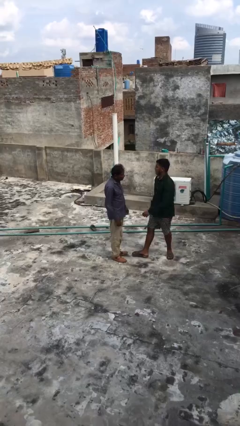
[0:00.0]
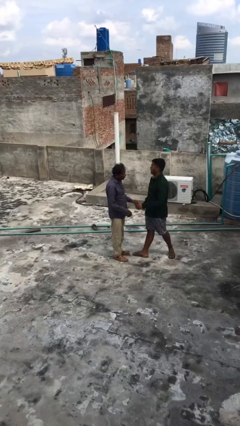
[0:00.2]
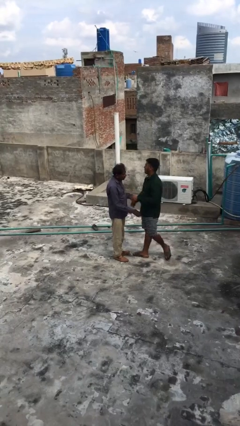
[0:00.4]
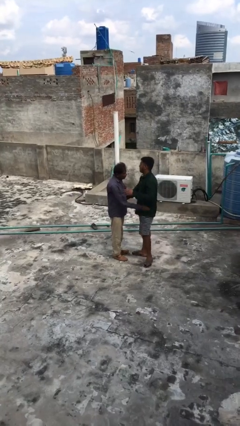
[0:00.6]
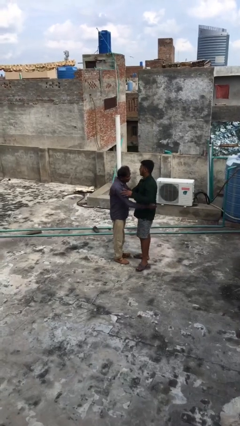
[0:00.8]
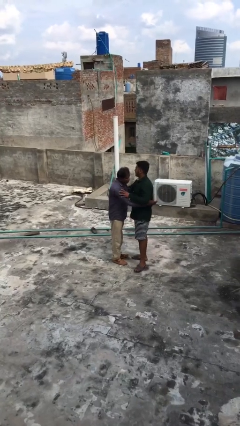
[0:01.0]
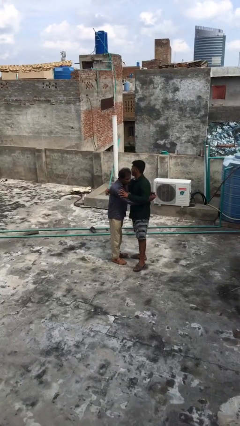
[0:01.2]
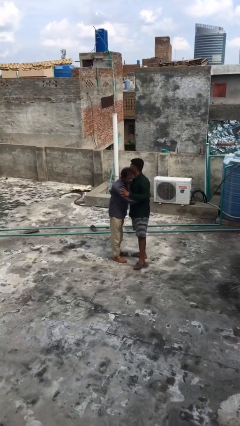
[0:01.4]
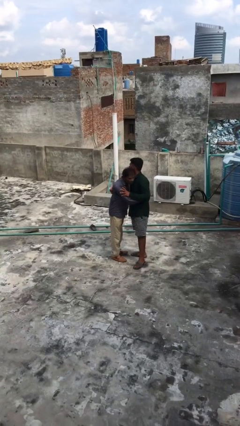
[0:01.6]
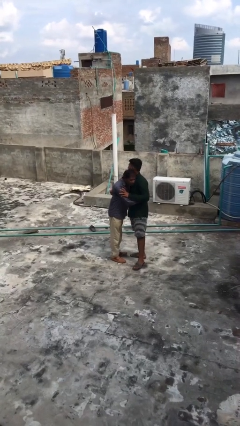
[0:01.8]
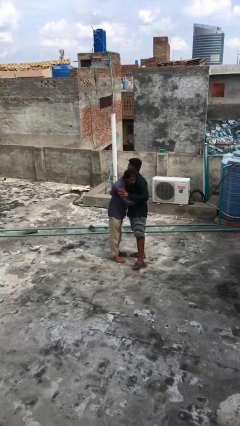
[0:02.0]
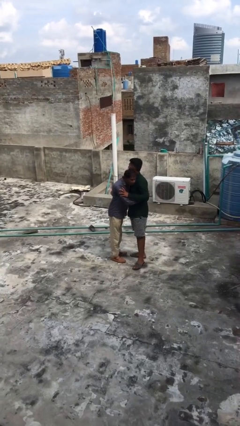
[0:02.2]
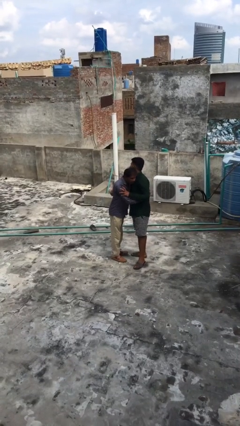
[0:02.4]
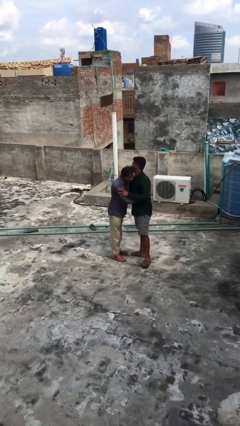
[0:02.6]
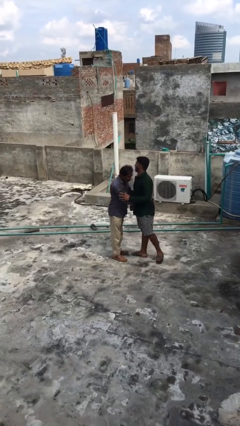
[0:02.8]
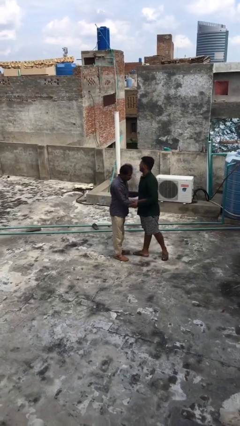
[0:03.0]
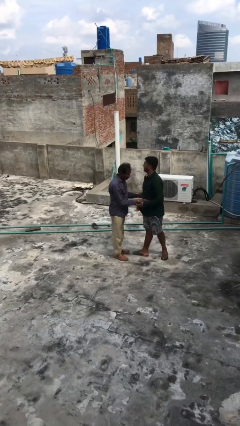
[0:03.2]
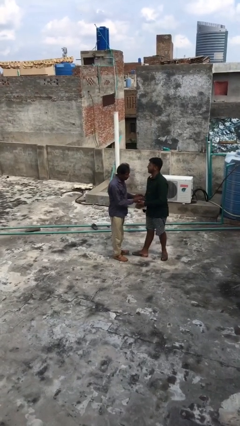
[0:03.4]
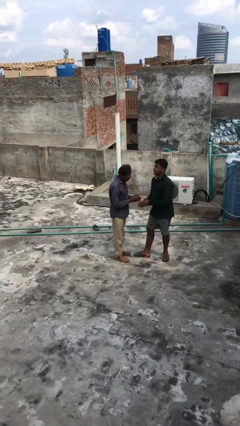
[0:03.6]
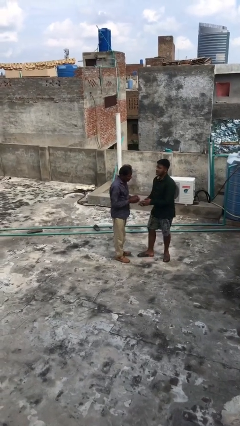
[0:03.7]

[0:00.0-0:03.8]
person embraces person

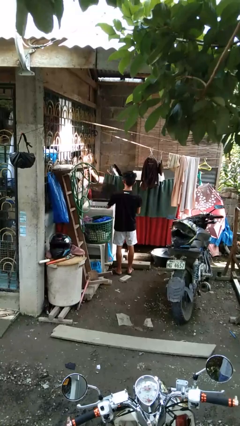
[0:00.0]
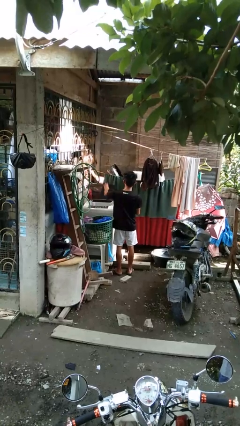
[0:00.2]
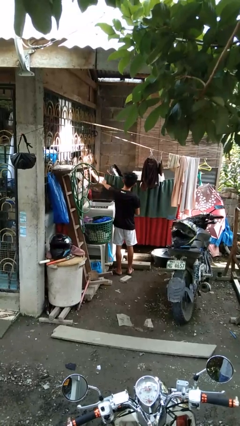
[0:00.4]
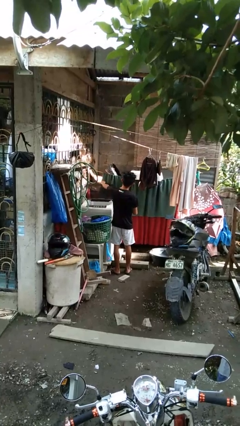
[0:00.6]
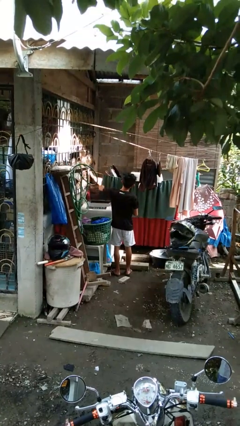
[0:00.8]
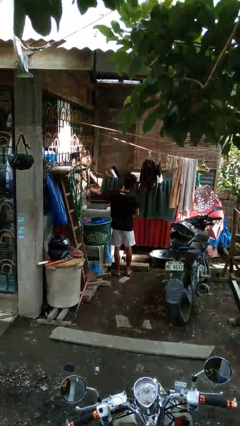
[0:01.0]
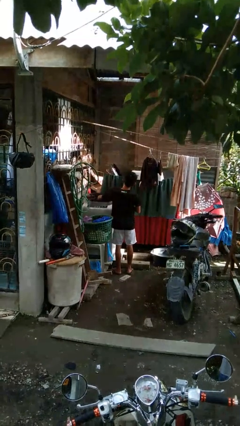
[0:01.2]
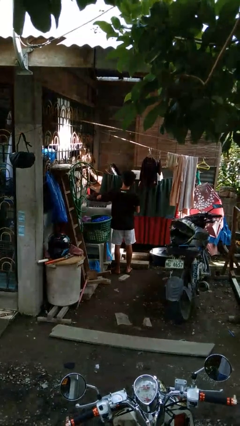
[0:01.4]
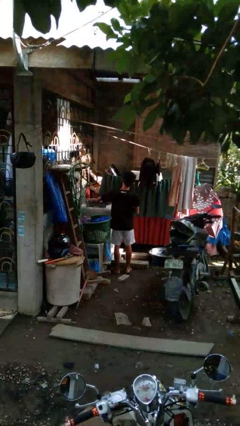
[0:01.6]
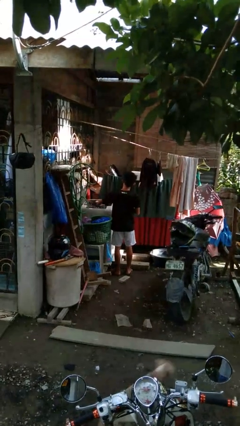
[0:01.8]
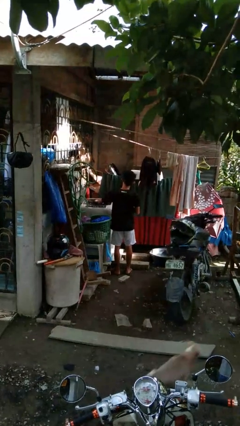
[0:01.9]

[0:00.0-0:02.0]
person closes clothes washer

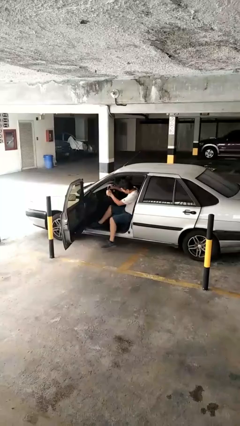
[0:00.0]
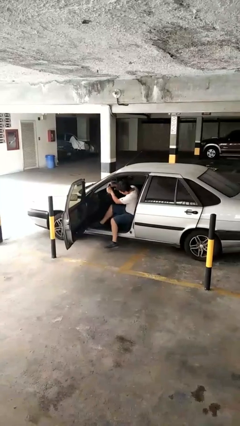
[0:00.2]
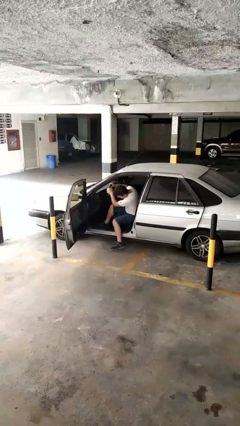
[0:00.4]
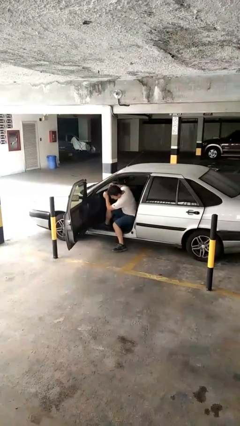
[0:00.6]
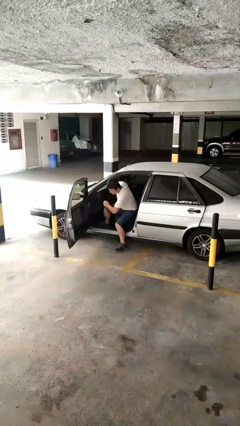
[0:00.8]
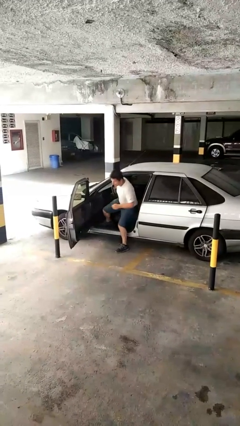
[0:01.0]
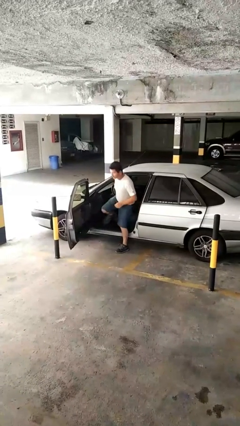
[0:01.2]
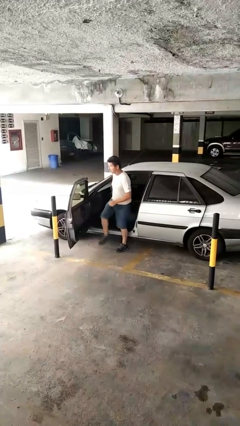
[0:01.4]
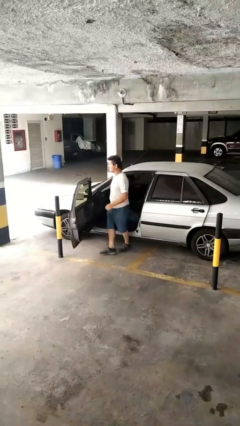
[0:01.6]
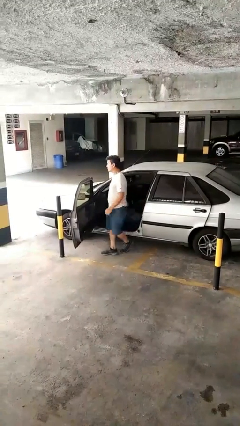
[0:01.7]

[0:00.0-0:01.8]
person exits car

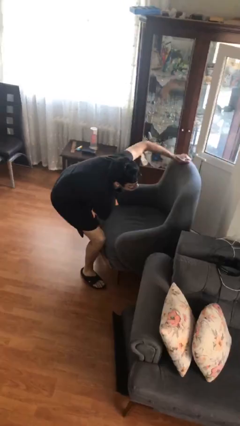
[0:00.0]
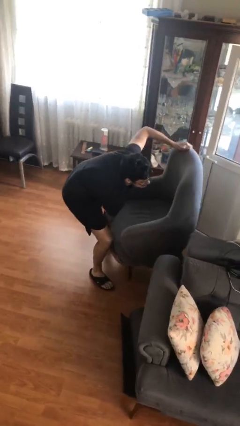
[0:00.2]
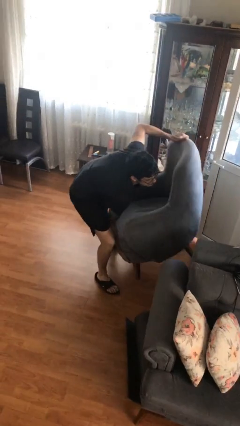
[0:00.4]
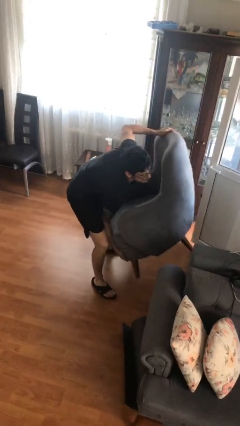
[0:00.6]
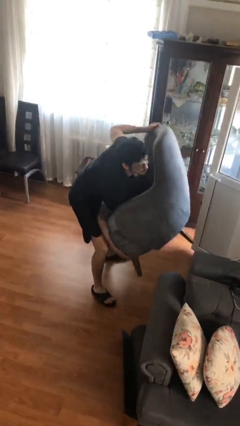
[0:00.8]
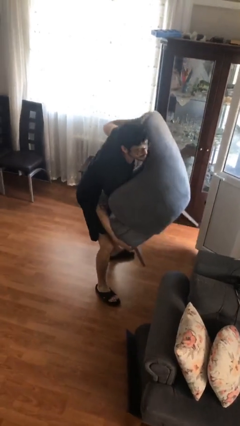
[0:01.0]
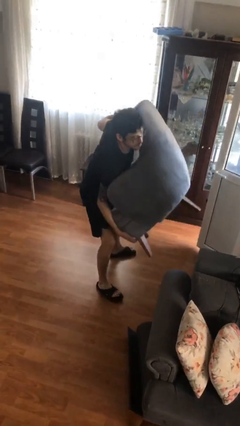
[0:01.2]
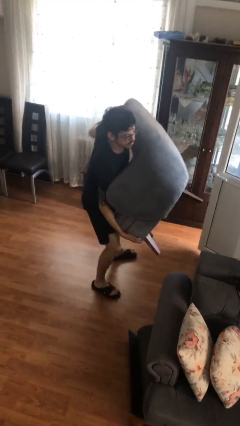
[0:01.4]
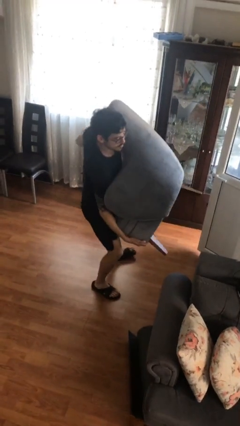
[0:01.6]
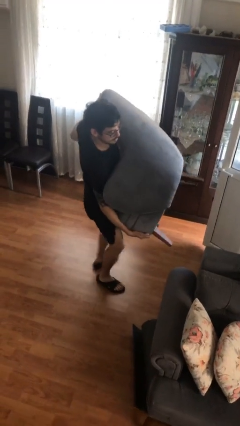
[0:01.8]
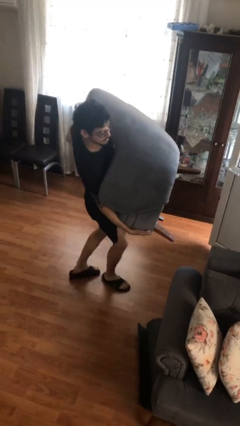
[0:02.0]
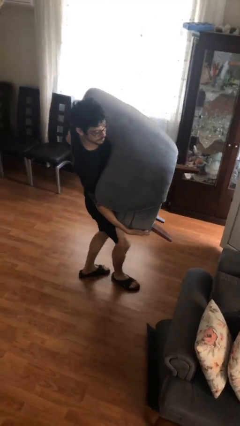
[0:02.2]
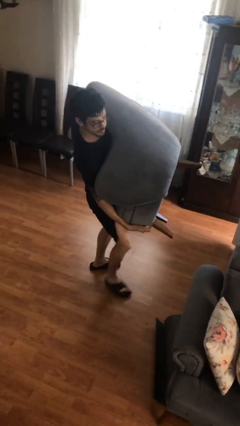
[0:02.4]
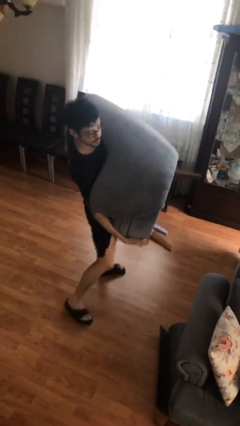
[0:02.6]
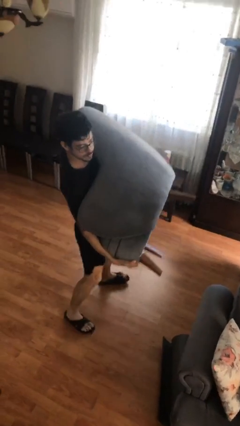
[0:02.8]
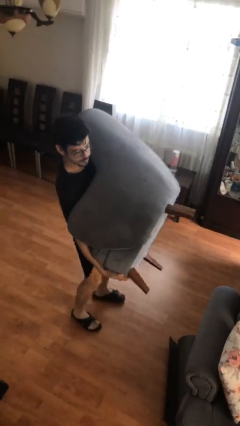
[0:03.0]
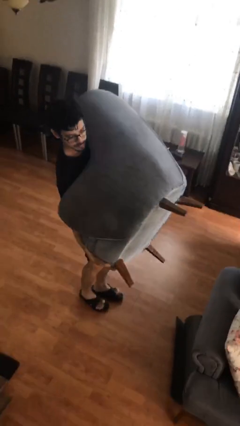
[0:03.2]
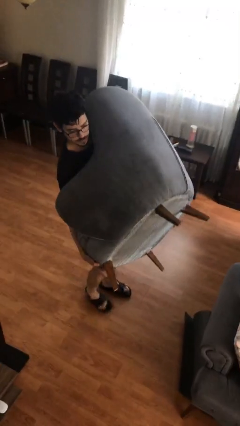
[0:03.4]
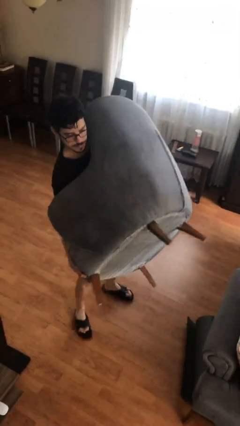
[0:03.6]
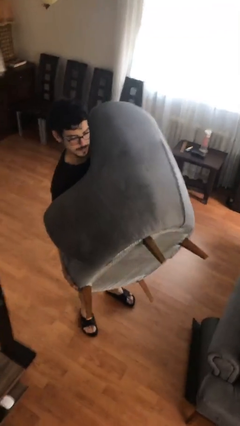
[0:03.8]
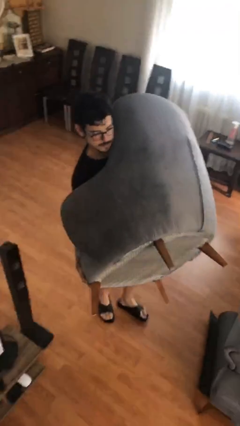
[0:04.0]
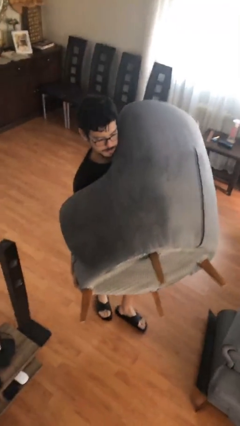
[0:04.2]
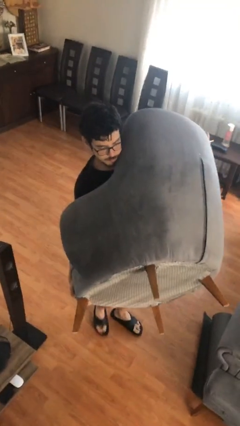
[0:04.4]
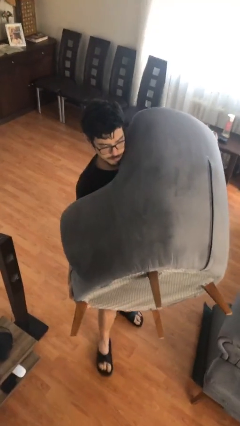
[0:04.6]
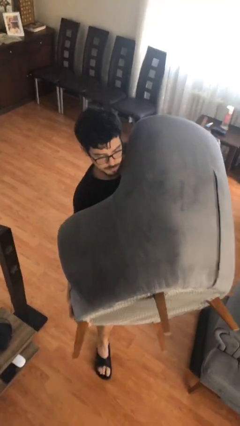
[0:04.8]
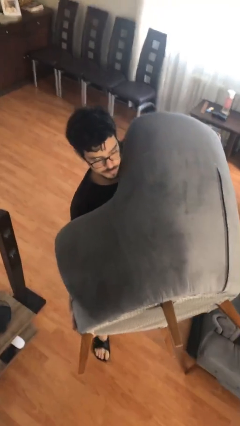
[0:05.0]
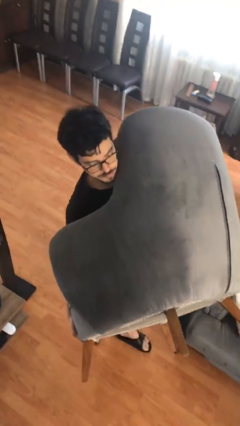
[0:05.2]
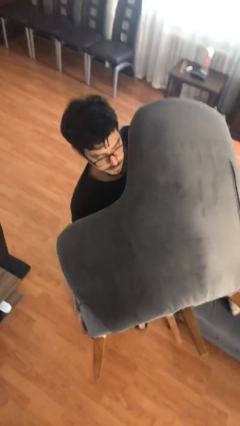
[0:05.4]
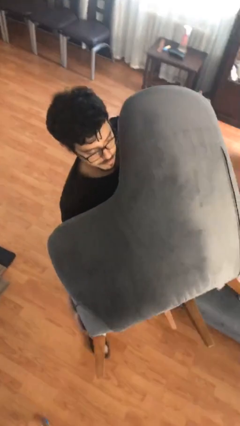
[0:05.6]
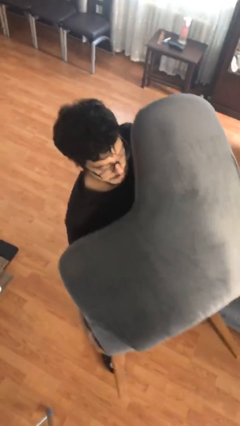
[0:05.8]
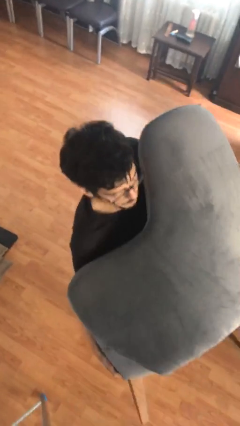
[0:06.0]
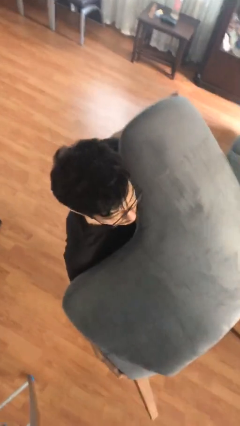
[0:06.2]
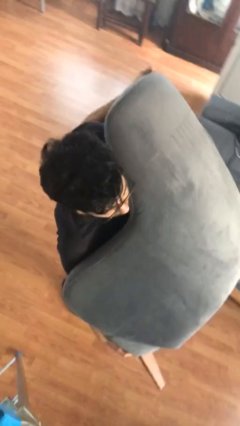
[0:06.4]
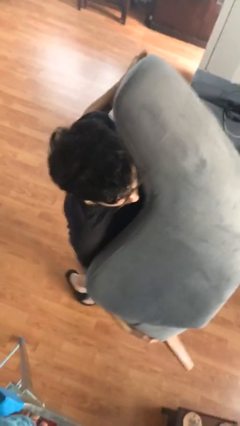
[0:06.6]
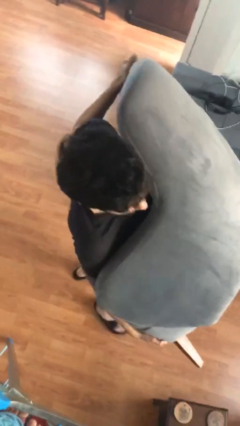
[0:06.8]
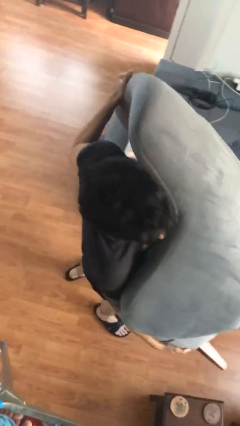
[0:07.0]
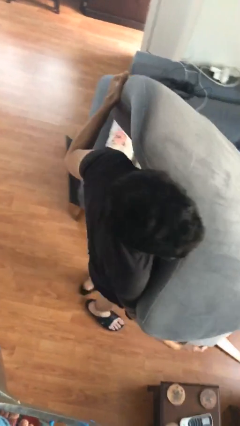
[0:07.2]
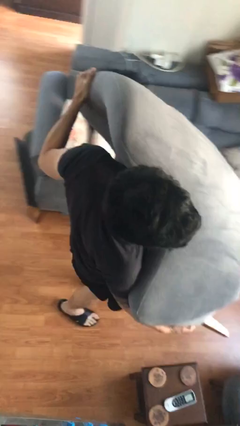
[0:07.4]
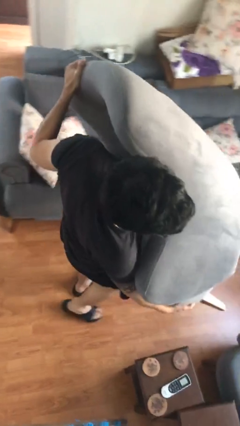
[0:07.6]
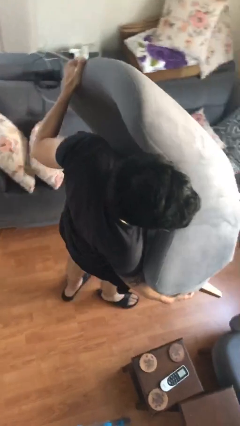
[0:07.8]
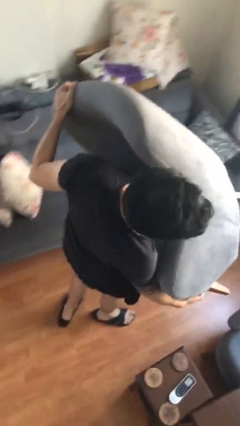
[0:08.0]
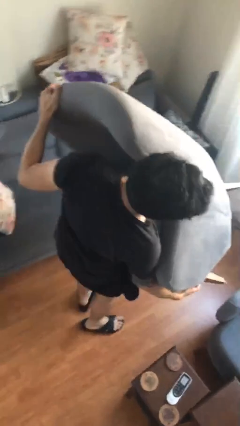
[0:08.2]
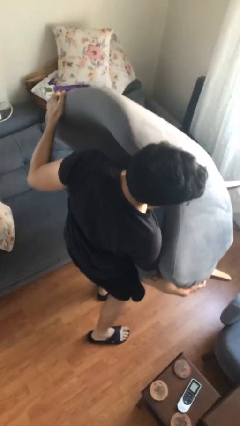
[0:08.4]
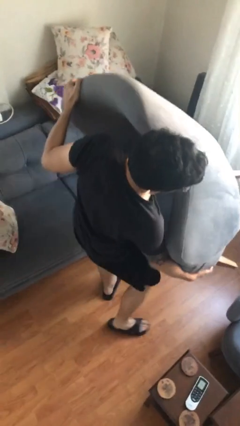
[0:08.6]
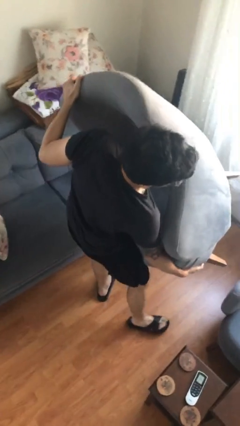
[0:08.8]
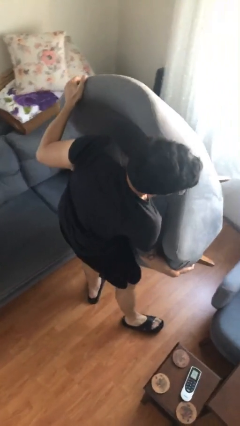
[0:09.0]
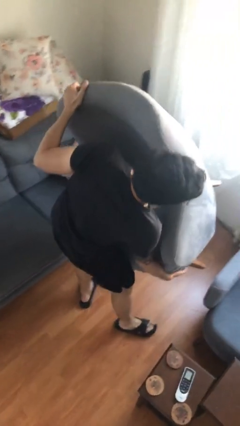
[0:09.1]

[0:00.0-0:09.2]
person carries heavy object

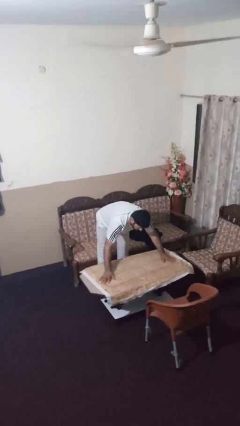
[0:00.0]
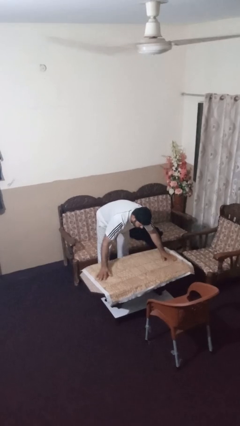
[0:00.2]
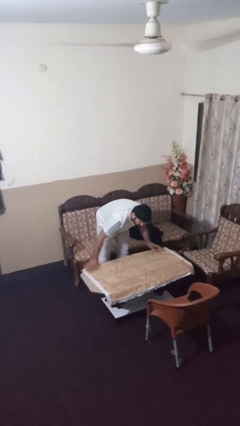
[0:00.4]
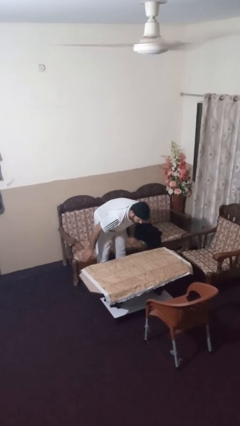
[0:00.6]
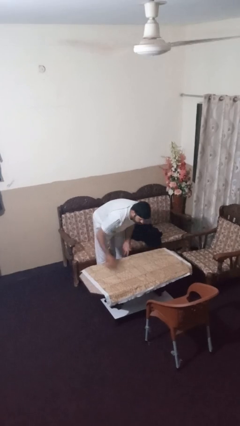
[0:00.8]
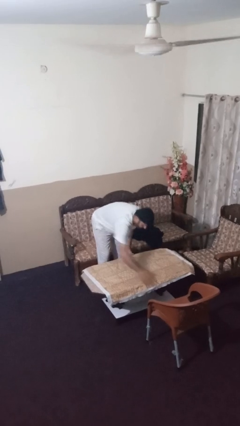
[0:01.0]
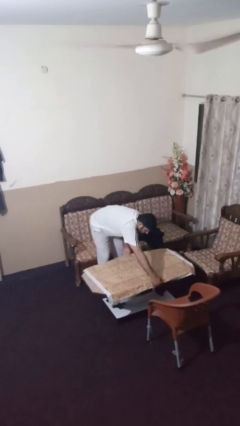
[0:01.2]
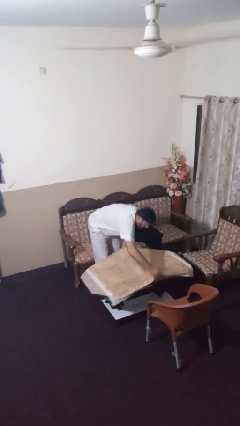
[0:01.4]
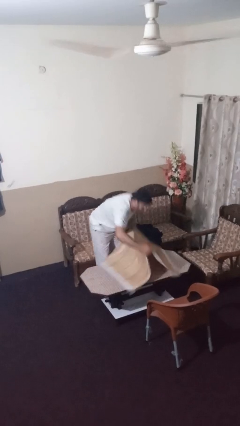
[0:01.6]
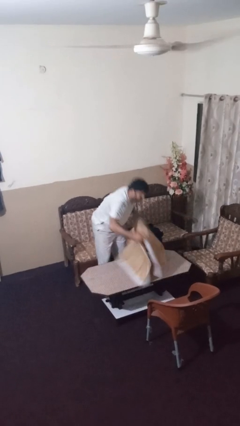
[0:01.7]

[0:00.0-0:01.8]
person folds tablecloth
